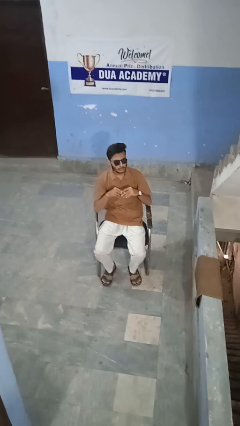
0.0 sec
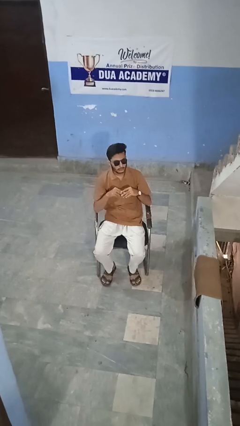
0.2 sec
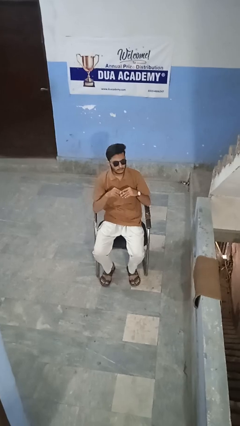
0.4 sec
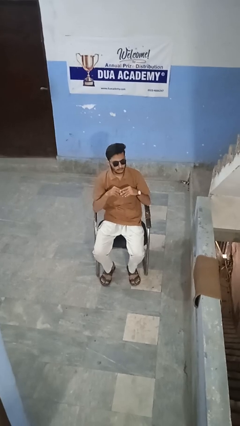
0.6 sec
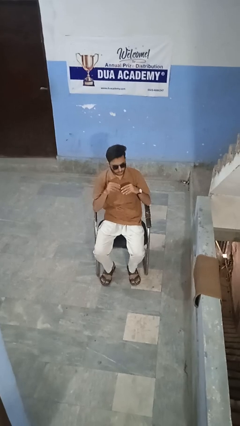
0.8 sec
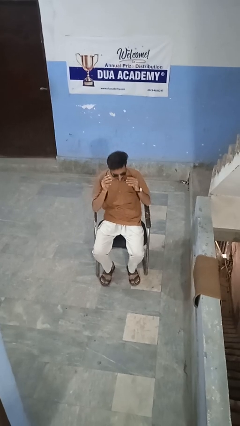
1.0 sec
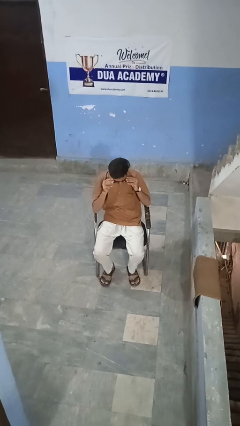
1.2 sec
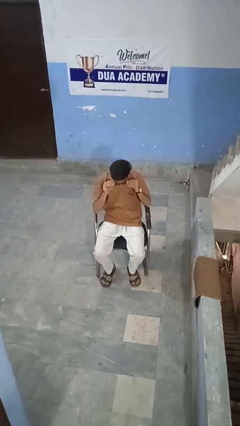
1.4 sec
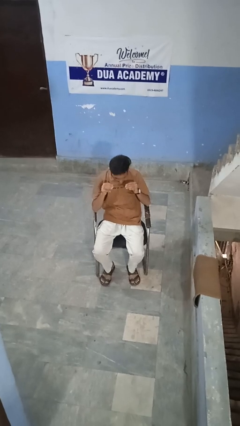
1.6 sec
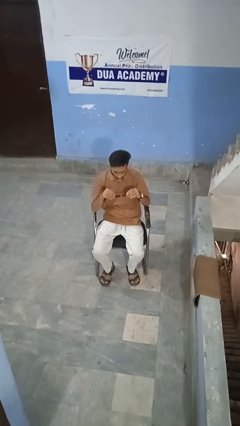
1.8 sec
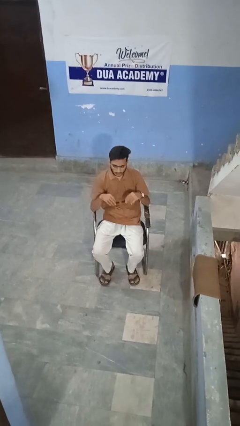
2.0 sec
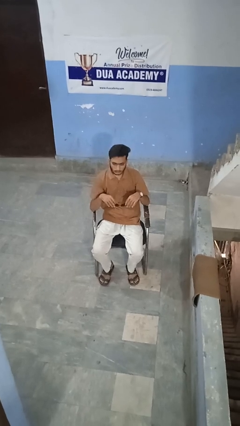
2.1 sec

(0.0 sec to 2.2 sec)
person takes off sunglasses

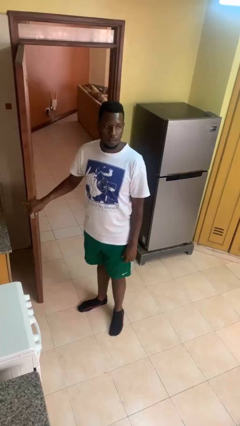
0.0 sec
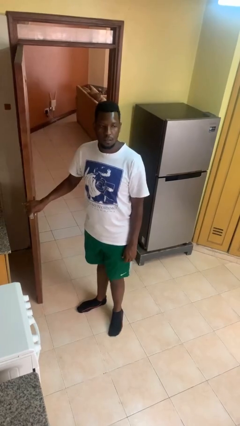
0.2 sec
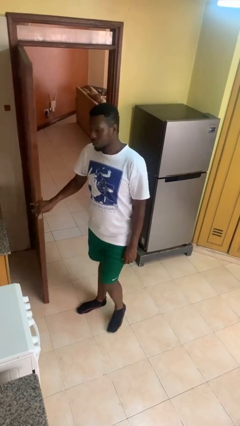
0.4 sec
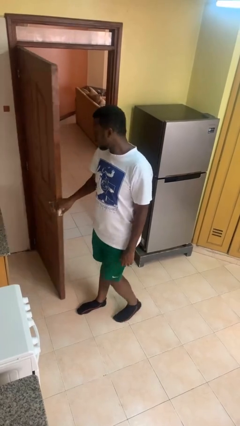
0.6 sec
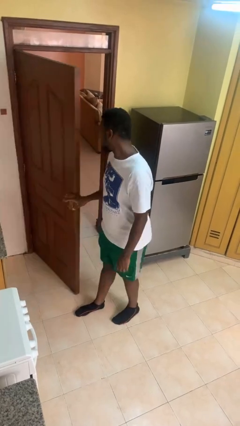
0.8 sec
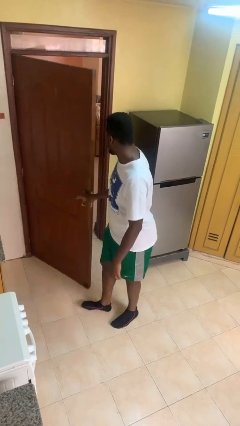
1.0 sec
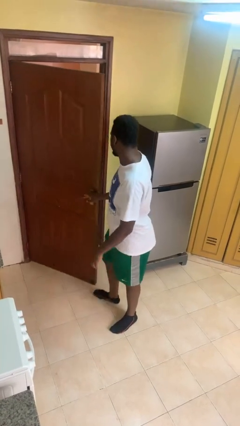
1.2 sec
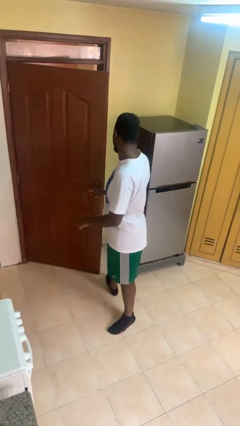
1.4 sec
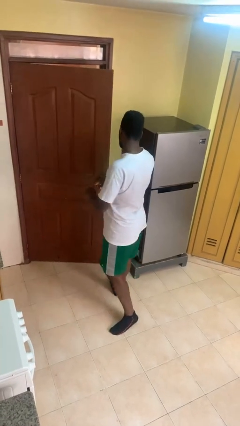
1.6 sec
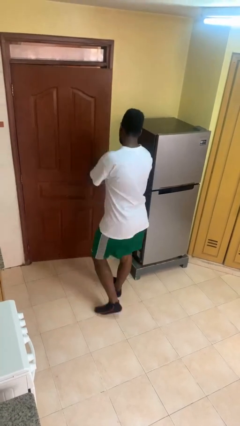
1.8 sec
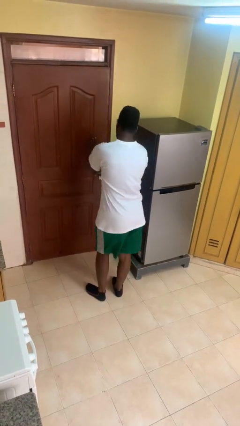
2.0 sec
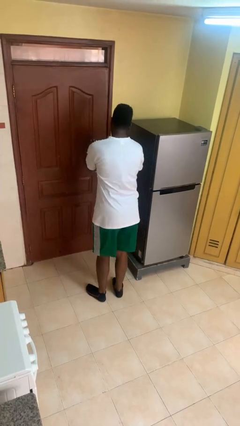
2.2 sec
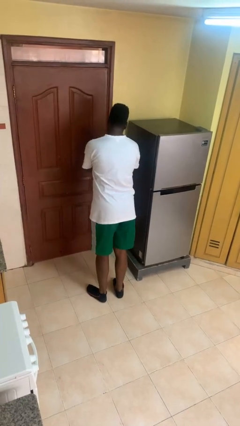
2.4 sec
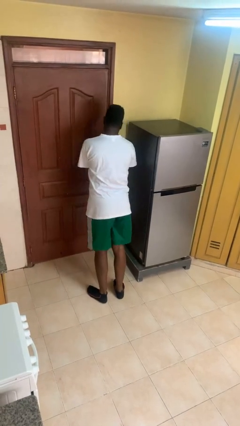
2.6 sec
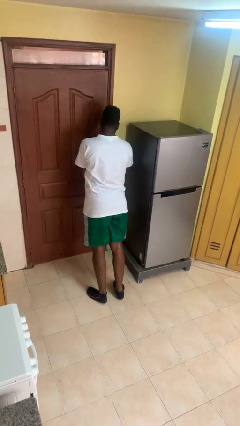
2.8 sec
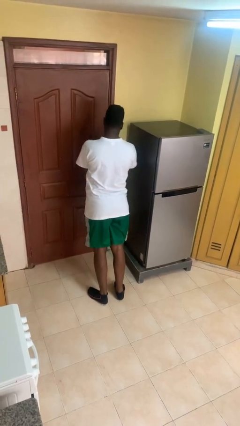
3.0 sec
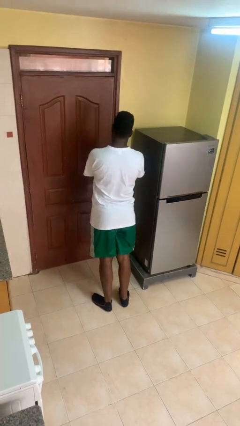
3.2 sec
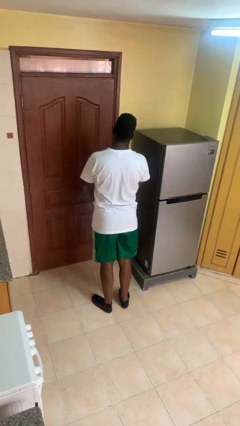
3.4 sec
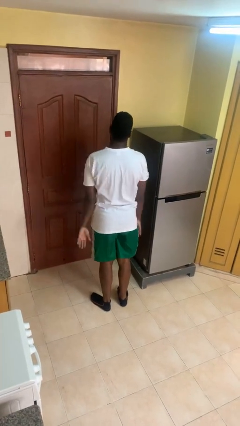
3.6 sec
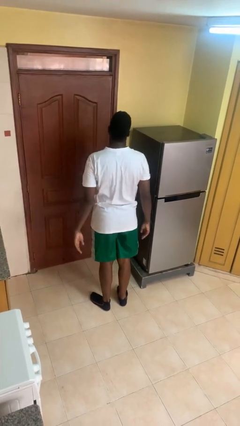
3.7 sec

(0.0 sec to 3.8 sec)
person closes facility door

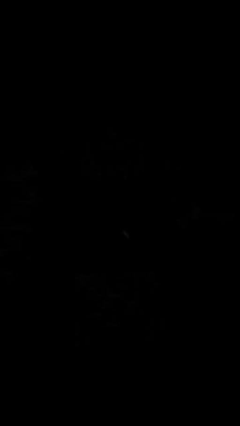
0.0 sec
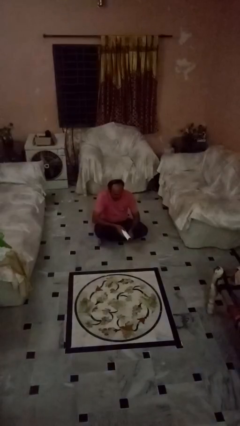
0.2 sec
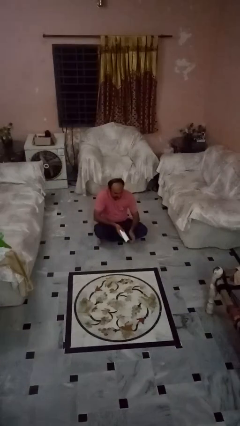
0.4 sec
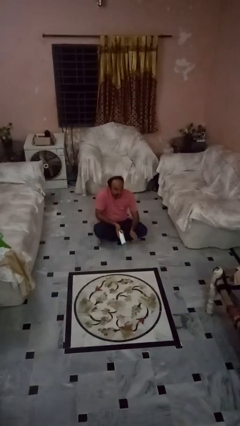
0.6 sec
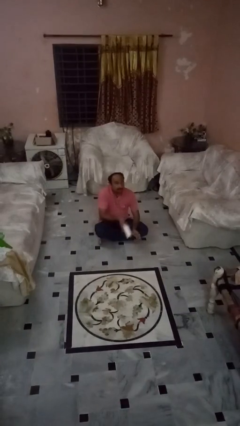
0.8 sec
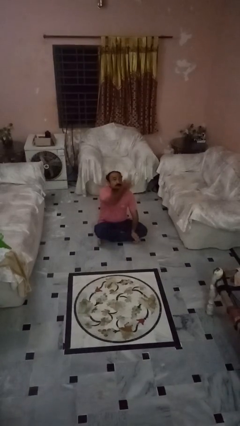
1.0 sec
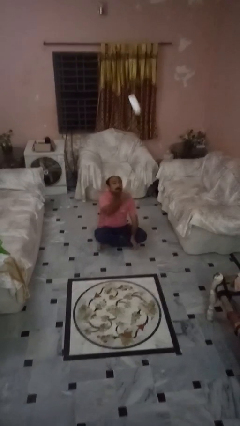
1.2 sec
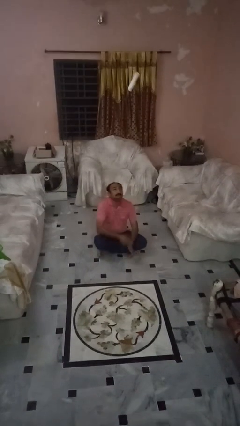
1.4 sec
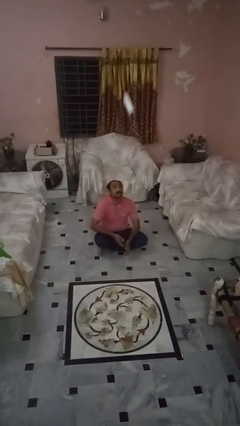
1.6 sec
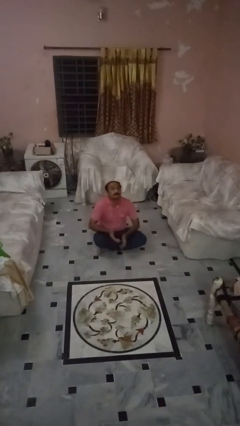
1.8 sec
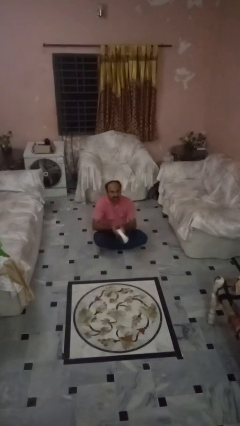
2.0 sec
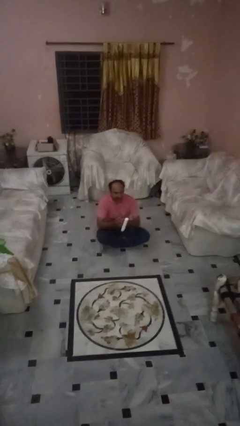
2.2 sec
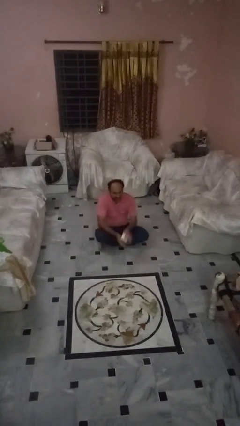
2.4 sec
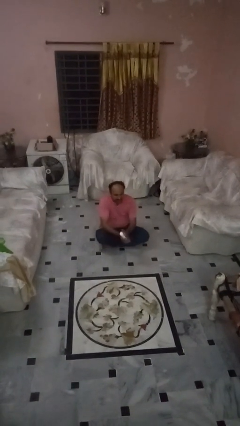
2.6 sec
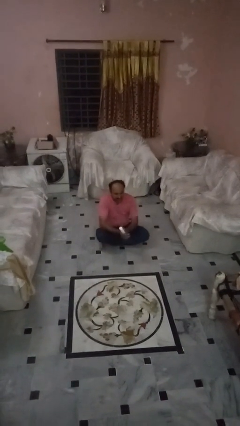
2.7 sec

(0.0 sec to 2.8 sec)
person drops object

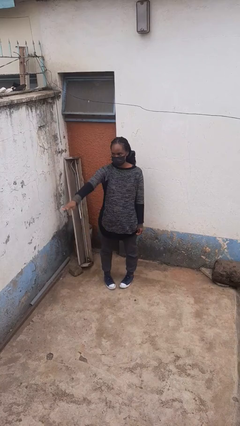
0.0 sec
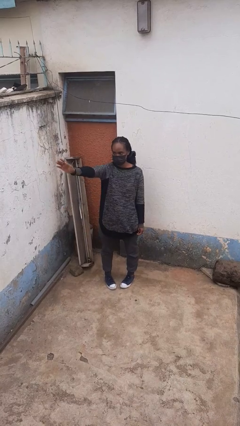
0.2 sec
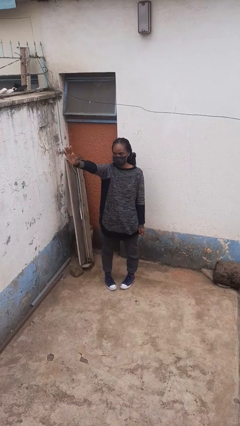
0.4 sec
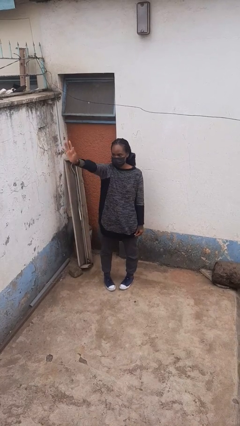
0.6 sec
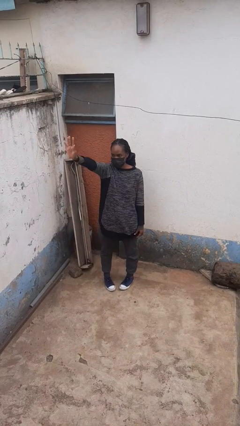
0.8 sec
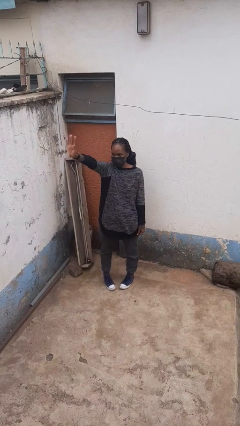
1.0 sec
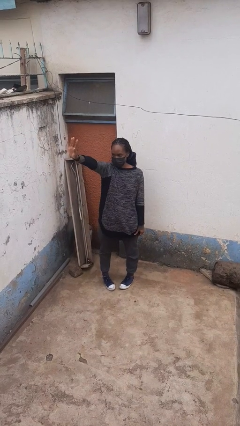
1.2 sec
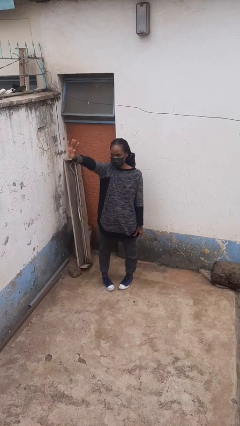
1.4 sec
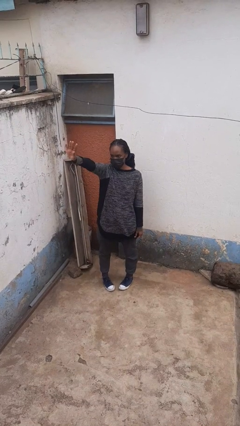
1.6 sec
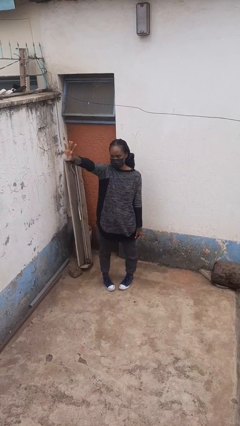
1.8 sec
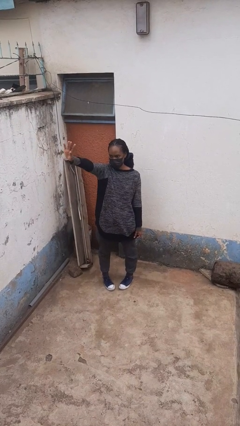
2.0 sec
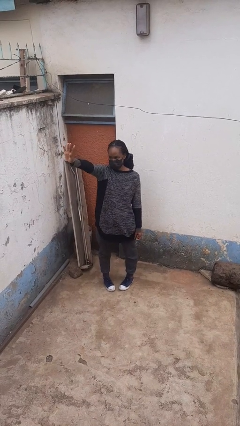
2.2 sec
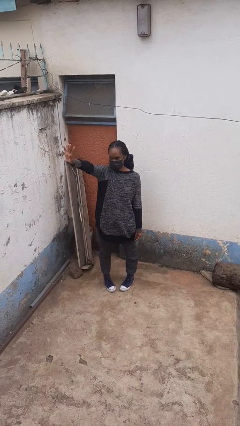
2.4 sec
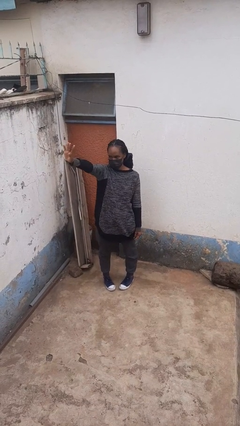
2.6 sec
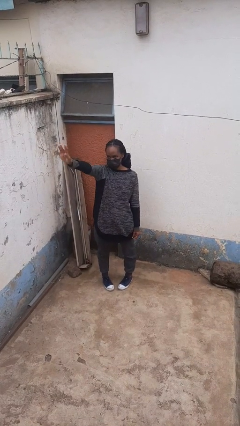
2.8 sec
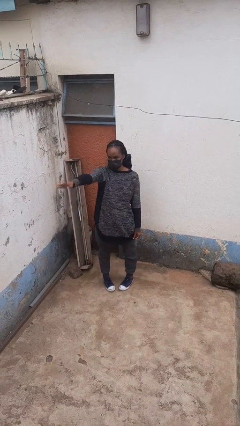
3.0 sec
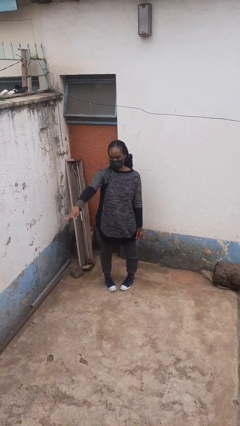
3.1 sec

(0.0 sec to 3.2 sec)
person waves at person

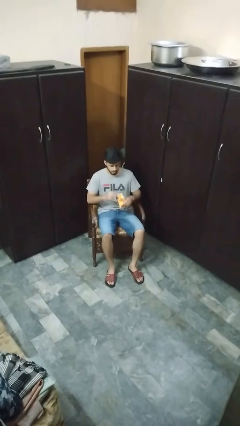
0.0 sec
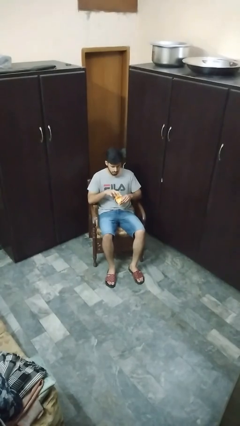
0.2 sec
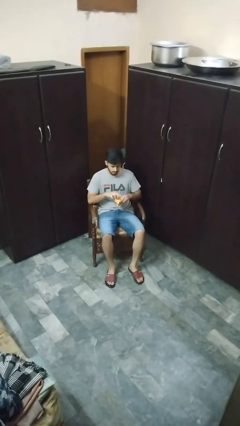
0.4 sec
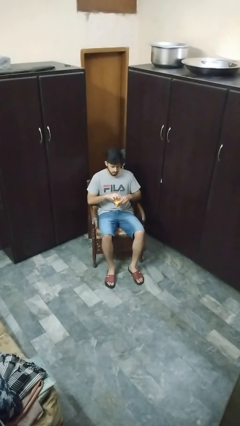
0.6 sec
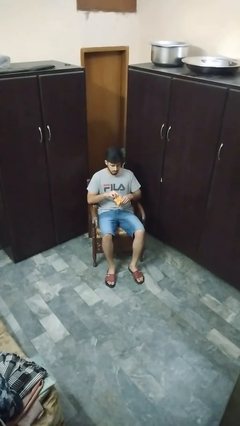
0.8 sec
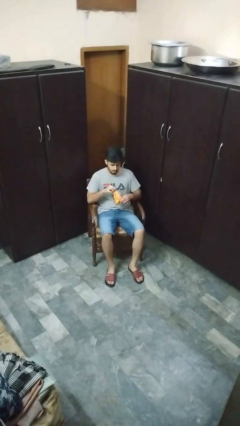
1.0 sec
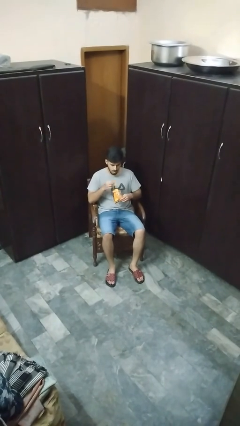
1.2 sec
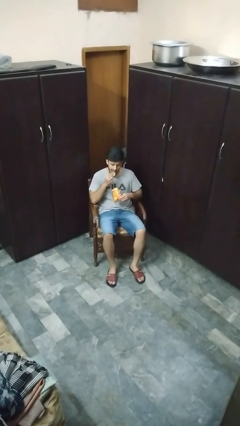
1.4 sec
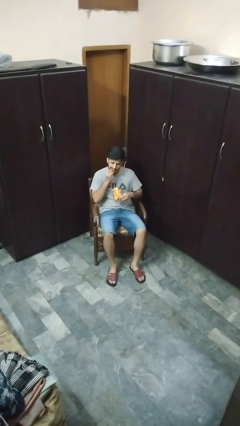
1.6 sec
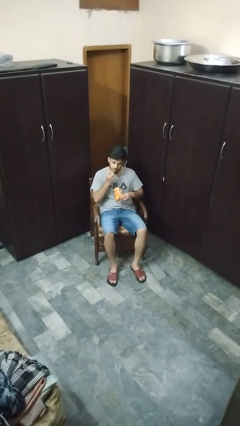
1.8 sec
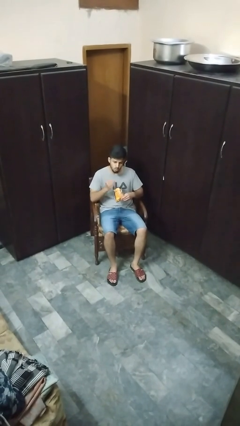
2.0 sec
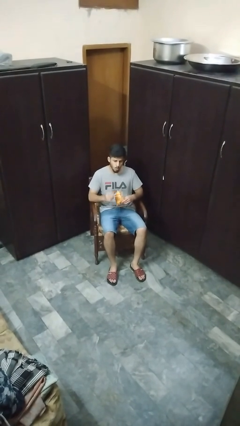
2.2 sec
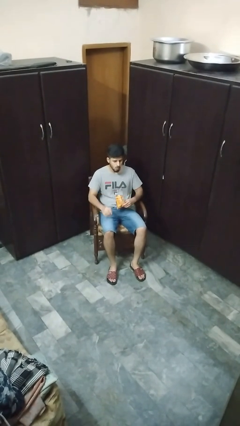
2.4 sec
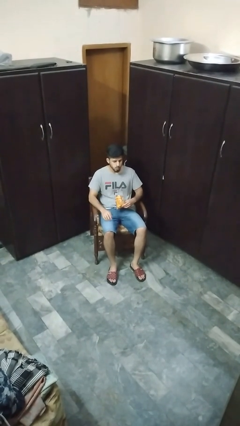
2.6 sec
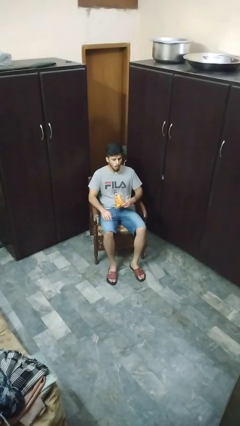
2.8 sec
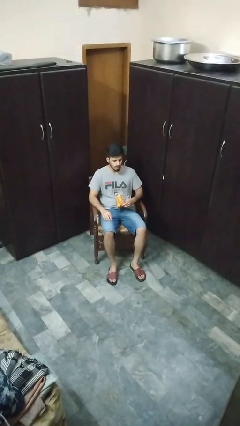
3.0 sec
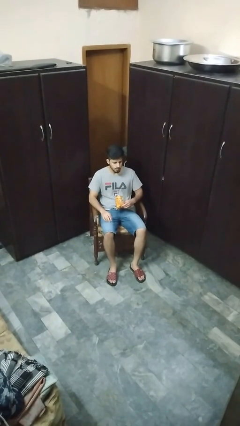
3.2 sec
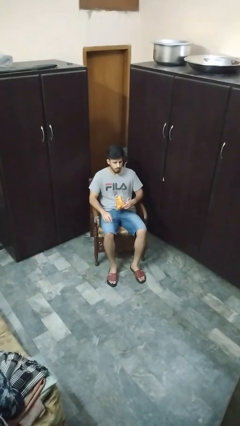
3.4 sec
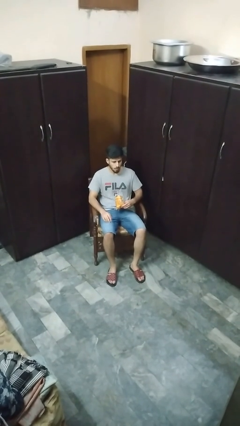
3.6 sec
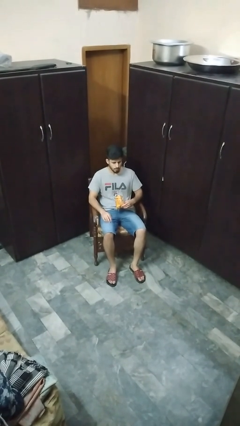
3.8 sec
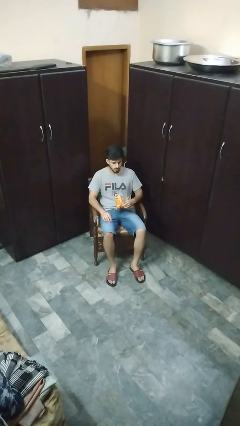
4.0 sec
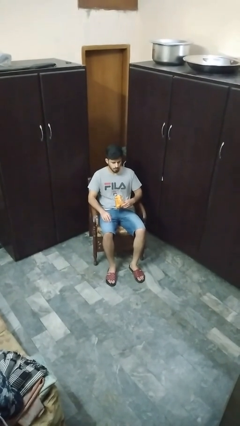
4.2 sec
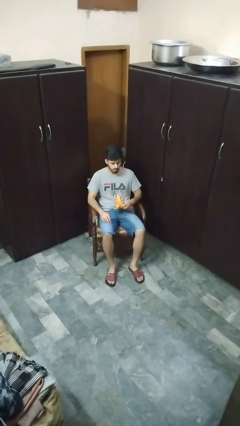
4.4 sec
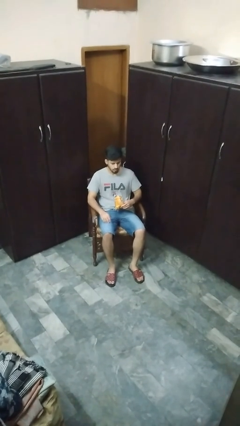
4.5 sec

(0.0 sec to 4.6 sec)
person eats snack from bag

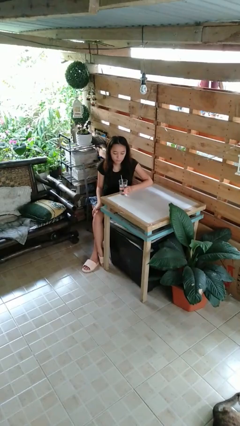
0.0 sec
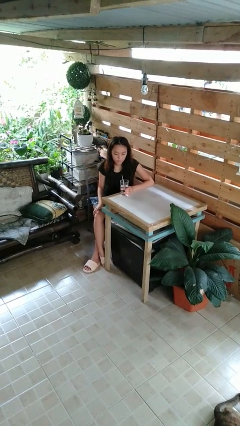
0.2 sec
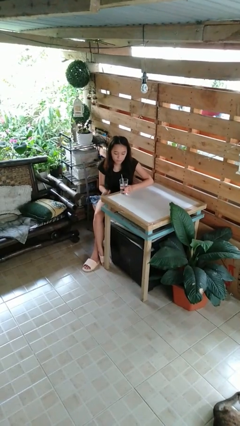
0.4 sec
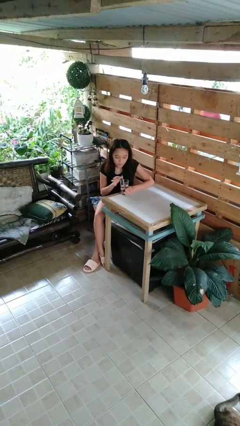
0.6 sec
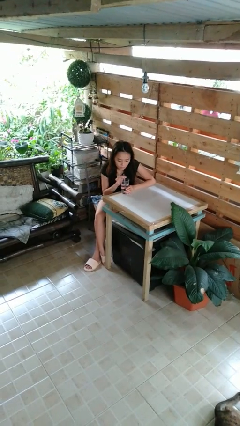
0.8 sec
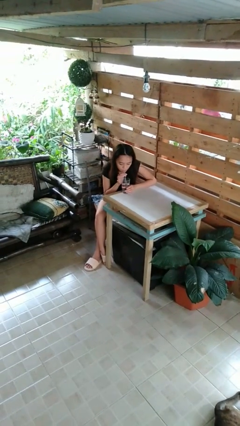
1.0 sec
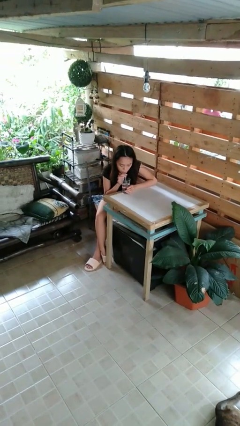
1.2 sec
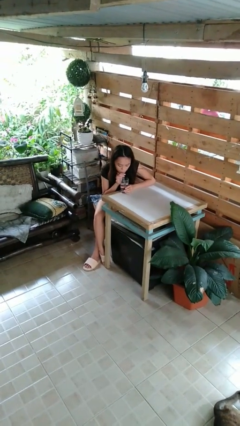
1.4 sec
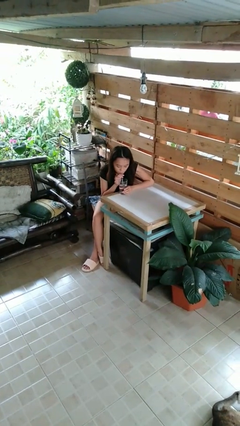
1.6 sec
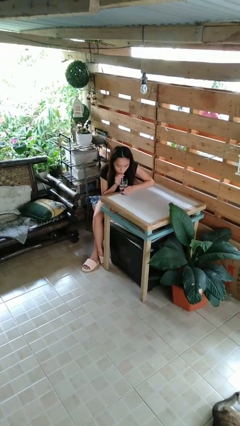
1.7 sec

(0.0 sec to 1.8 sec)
person drinks from straw
